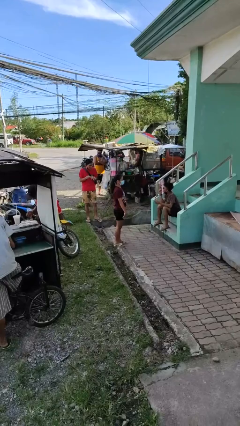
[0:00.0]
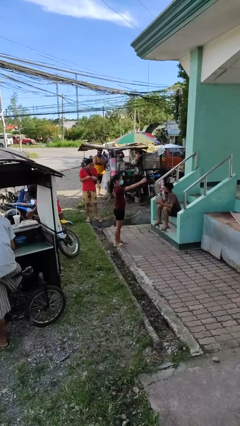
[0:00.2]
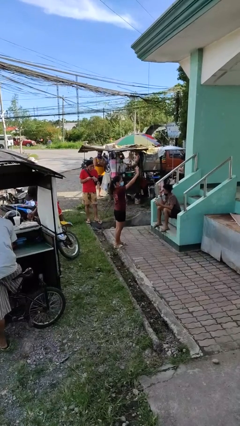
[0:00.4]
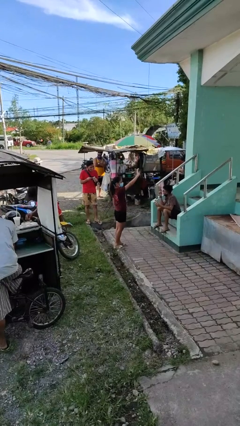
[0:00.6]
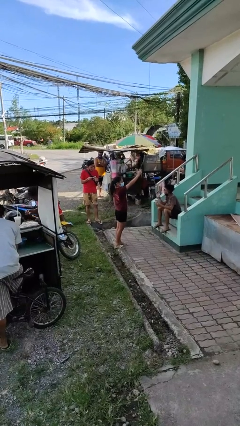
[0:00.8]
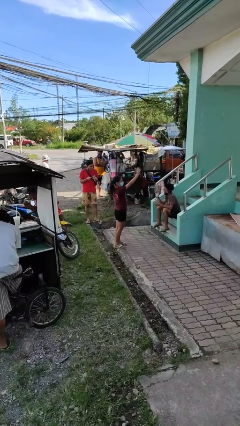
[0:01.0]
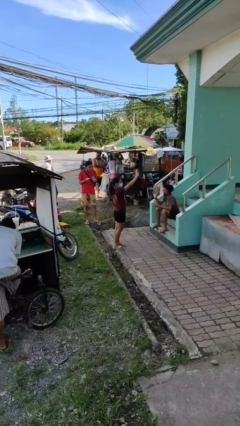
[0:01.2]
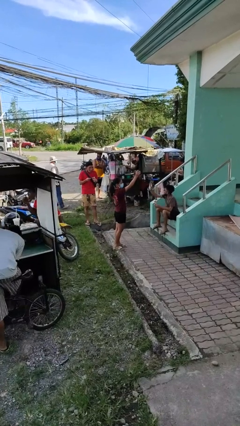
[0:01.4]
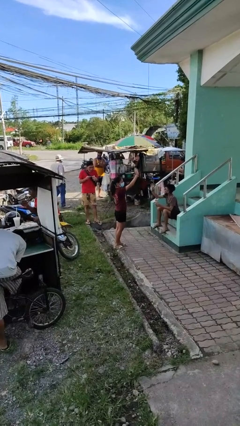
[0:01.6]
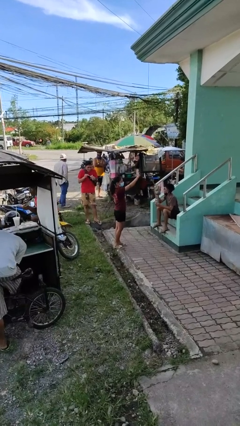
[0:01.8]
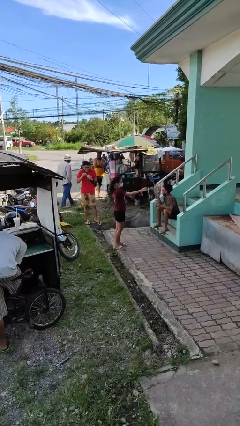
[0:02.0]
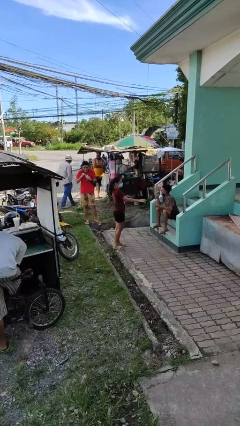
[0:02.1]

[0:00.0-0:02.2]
person waves at person

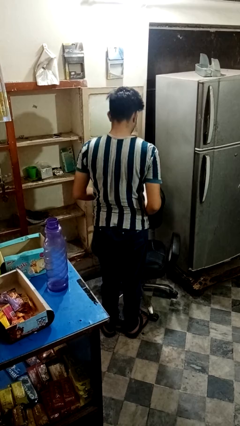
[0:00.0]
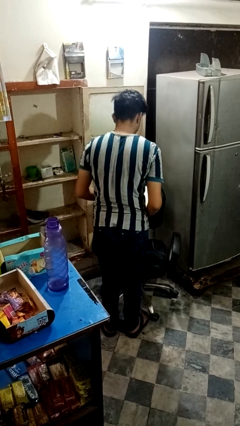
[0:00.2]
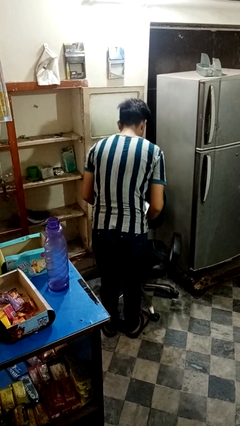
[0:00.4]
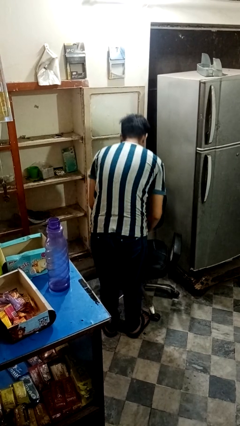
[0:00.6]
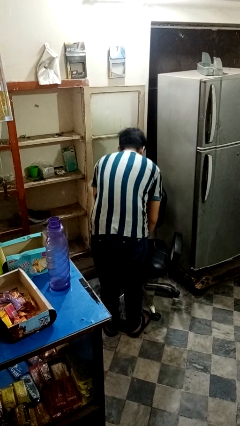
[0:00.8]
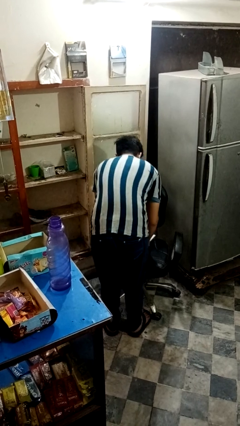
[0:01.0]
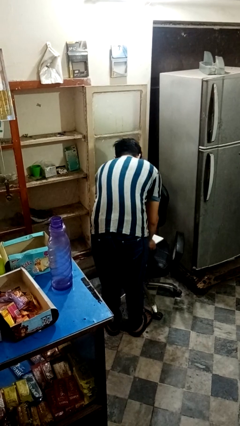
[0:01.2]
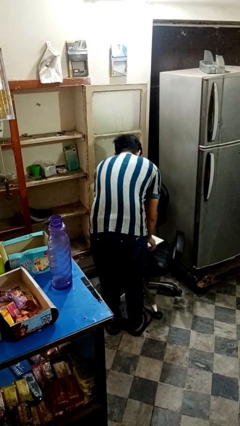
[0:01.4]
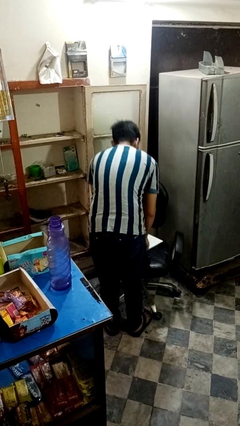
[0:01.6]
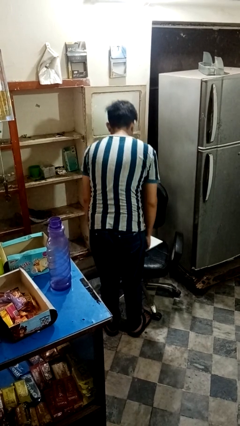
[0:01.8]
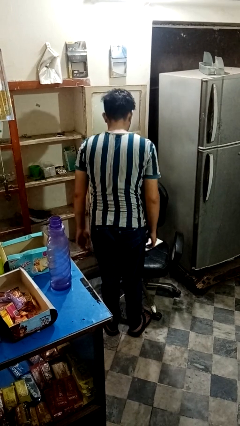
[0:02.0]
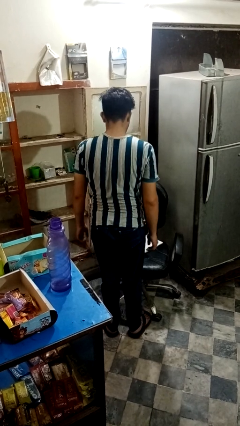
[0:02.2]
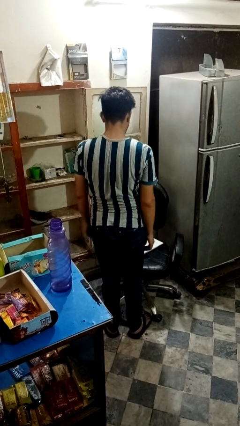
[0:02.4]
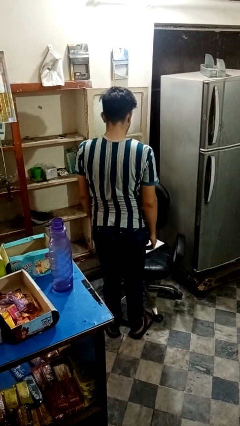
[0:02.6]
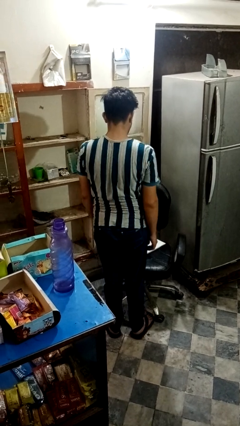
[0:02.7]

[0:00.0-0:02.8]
person puts down object on couch

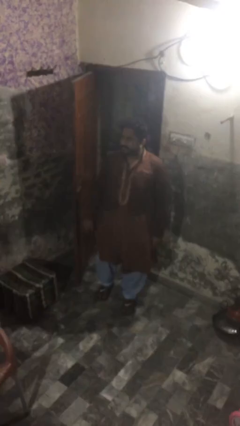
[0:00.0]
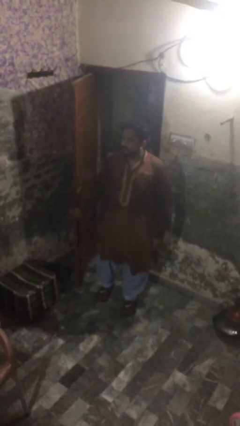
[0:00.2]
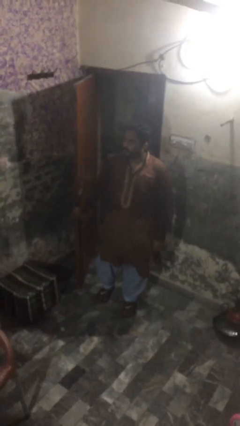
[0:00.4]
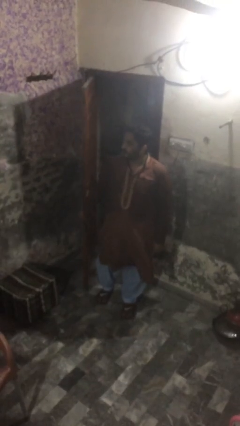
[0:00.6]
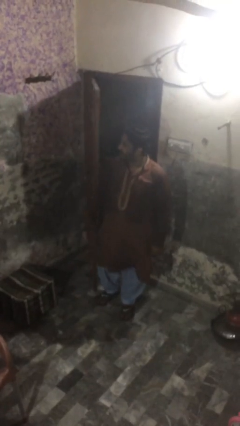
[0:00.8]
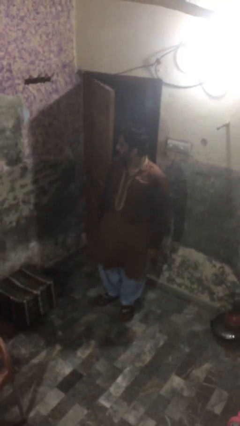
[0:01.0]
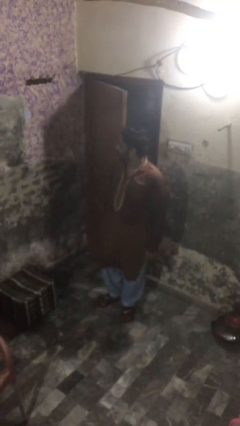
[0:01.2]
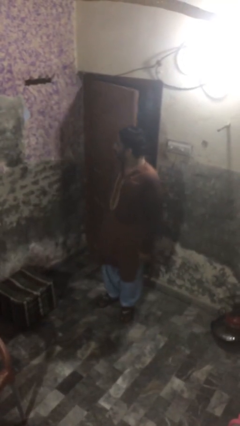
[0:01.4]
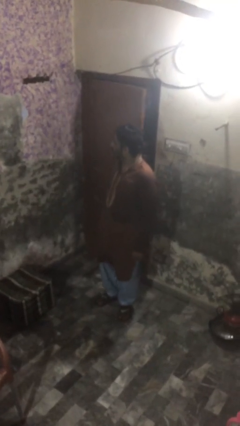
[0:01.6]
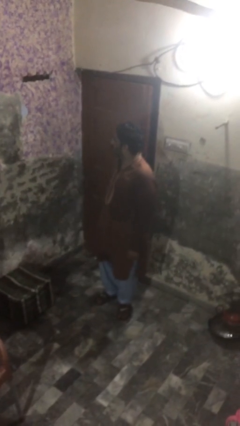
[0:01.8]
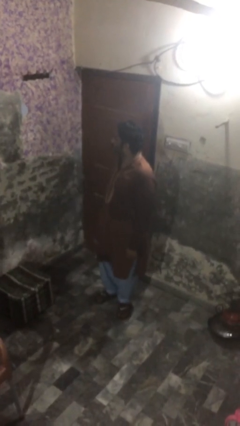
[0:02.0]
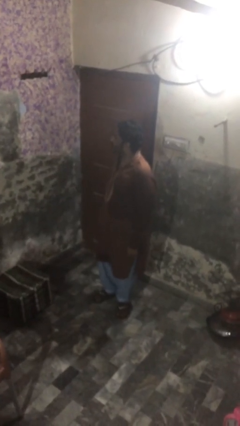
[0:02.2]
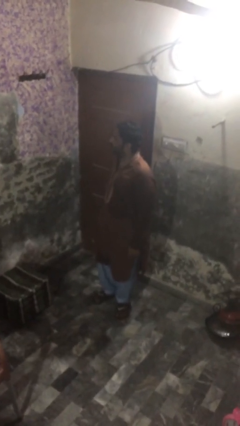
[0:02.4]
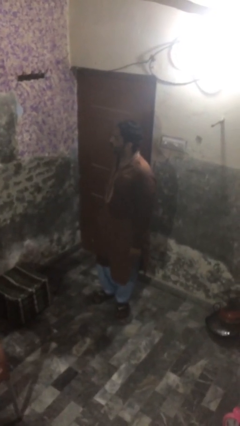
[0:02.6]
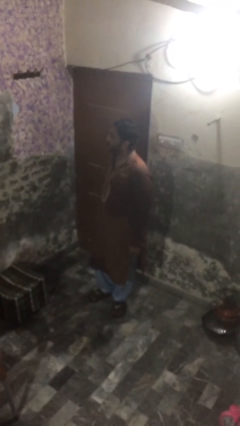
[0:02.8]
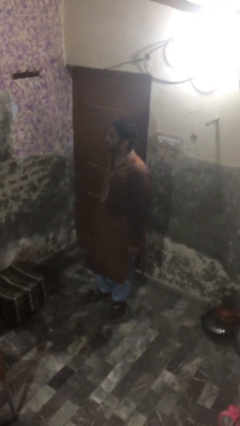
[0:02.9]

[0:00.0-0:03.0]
person closes facility door

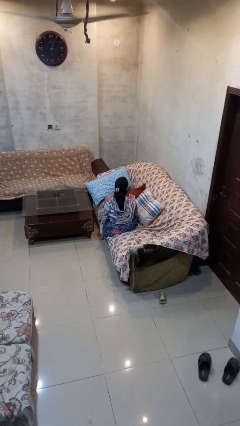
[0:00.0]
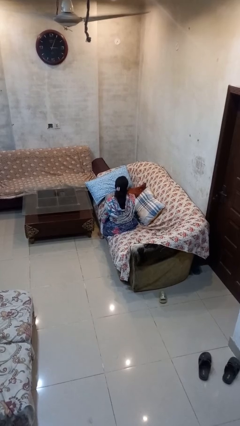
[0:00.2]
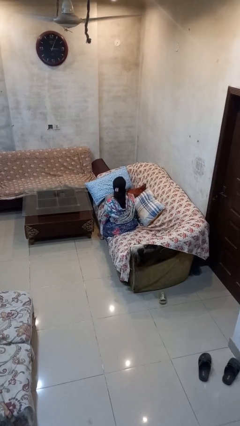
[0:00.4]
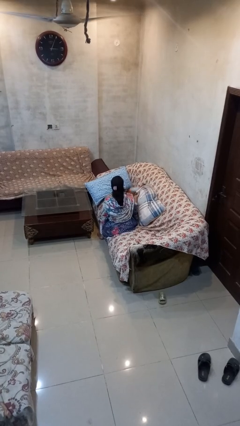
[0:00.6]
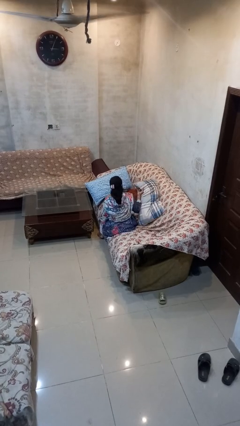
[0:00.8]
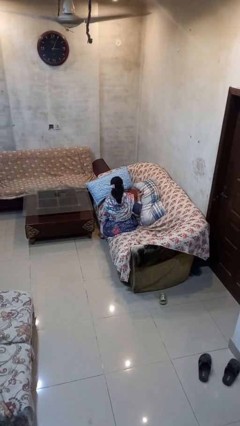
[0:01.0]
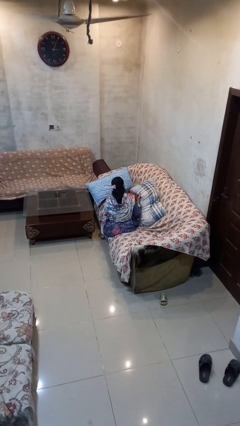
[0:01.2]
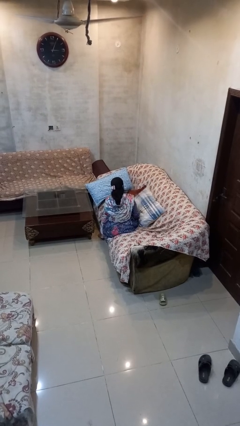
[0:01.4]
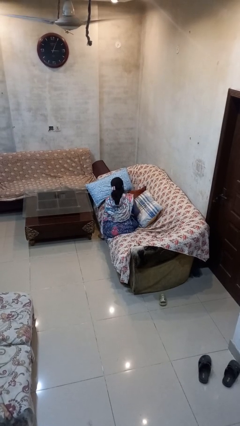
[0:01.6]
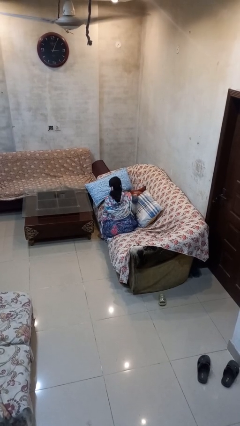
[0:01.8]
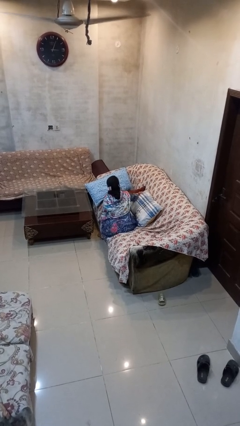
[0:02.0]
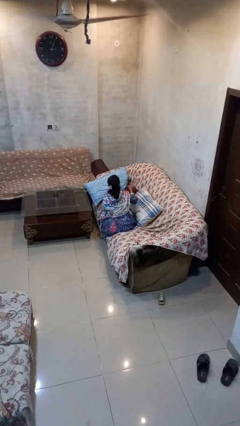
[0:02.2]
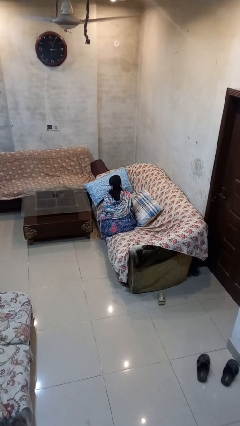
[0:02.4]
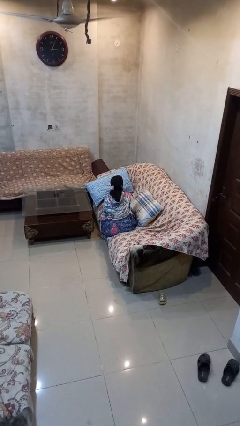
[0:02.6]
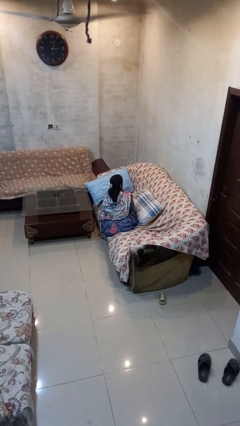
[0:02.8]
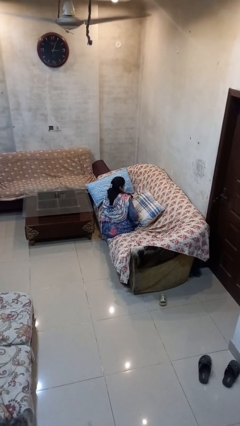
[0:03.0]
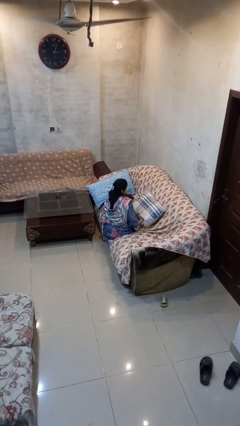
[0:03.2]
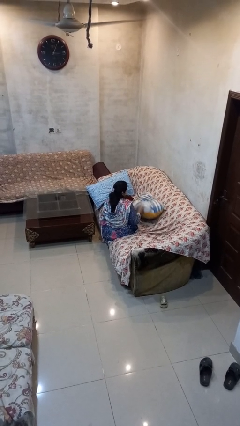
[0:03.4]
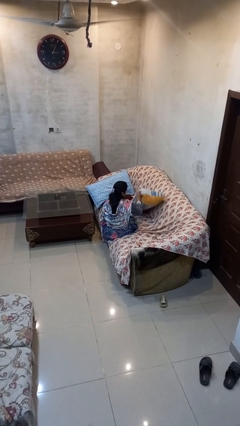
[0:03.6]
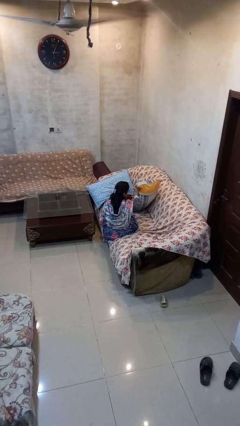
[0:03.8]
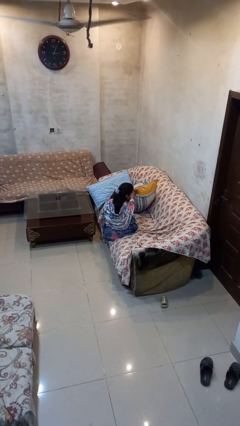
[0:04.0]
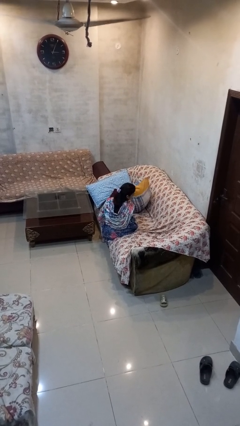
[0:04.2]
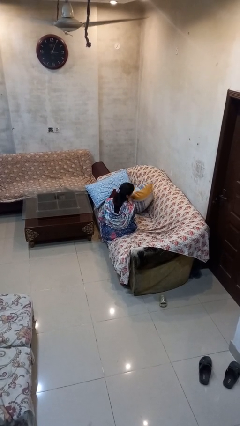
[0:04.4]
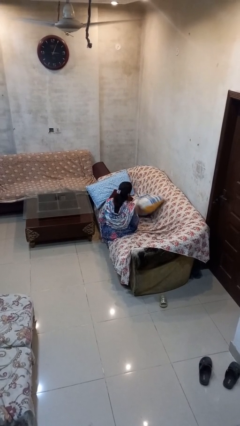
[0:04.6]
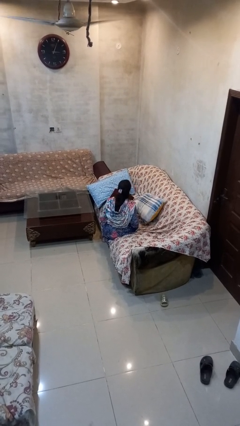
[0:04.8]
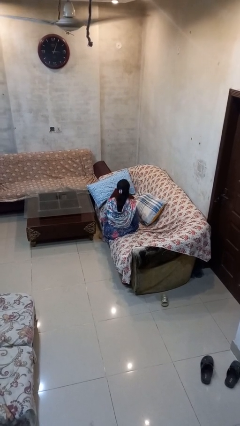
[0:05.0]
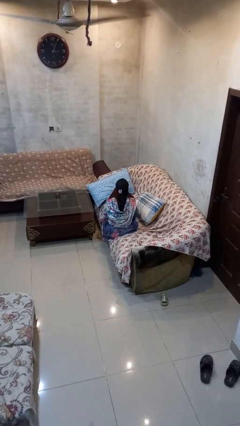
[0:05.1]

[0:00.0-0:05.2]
person searches in couch

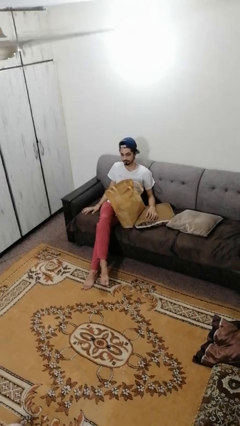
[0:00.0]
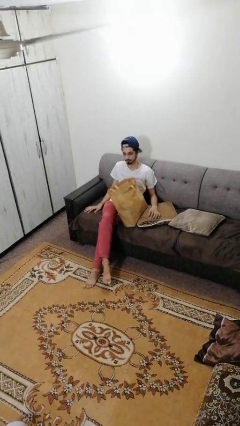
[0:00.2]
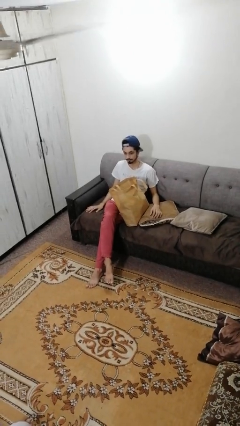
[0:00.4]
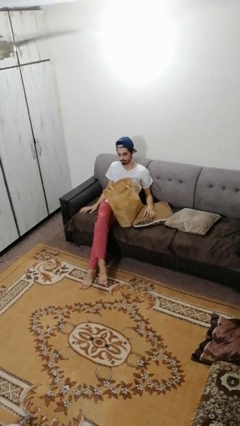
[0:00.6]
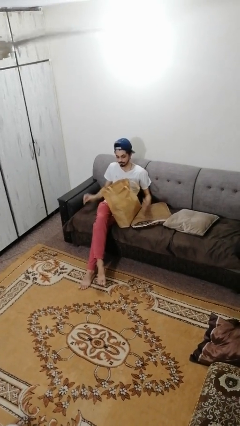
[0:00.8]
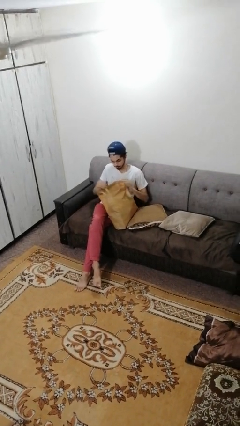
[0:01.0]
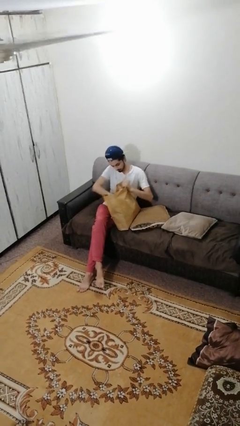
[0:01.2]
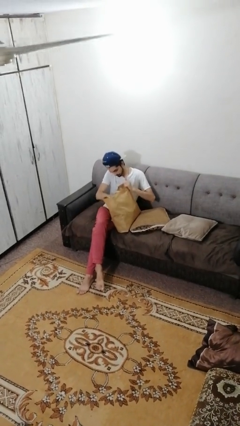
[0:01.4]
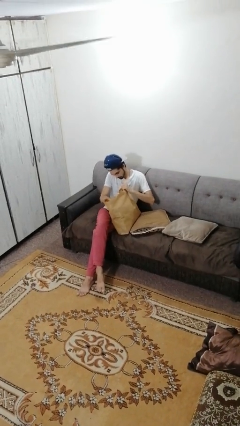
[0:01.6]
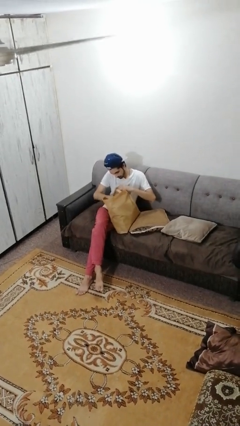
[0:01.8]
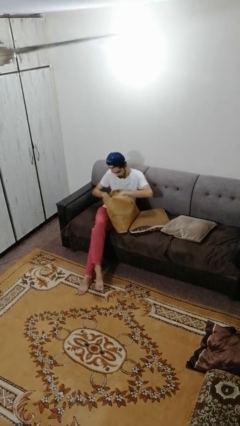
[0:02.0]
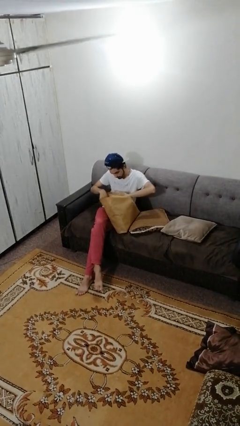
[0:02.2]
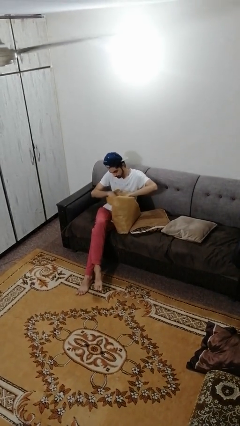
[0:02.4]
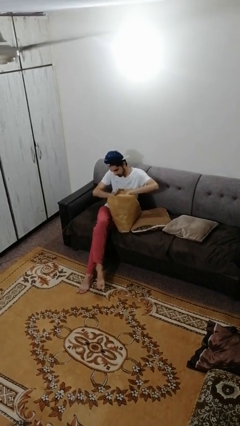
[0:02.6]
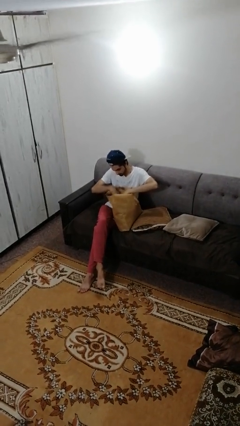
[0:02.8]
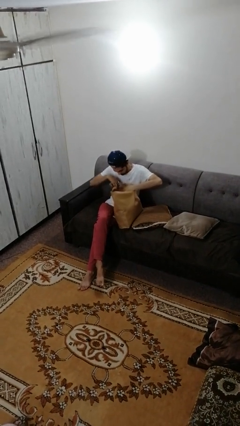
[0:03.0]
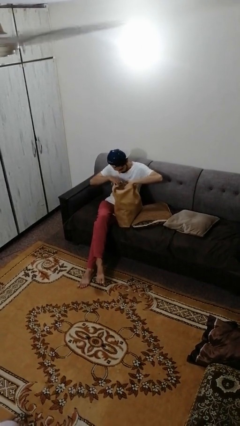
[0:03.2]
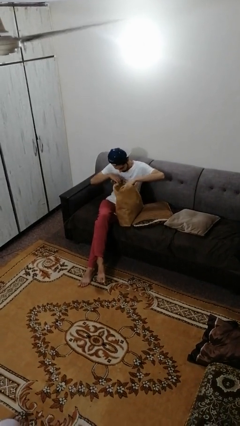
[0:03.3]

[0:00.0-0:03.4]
person searches in bag

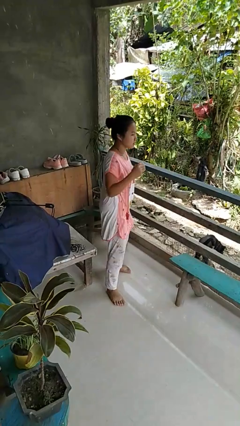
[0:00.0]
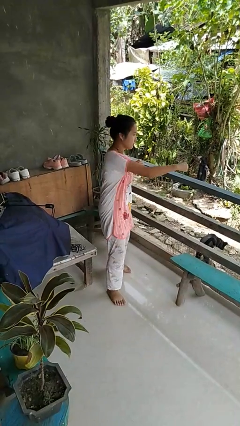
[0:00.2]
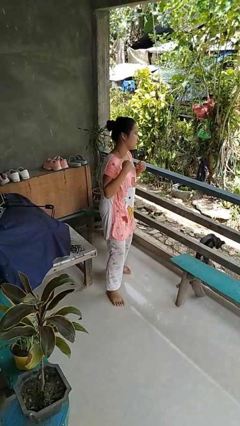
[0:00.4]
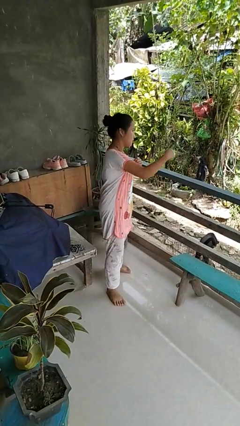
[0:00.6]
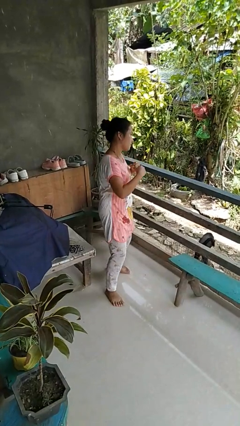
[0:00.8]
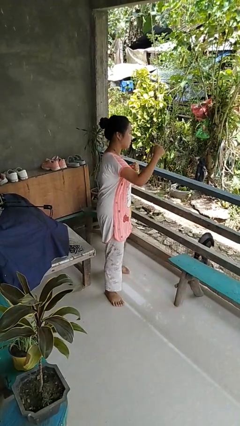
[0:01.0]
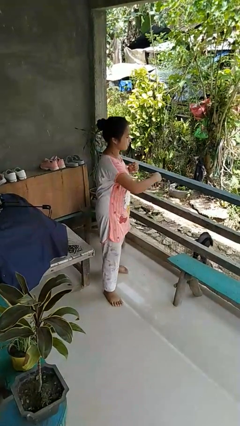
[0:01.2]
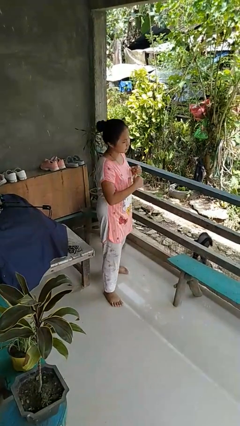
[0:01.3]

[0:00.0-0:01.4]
person punches
